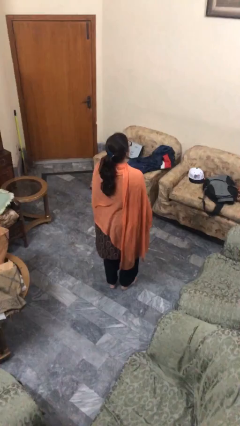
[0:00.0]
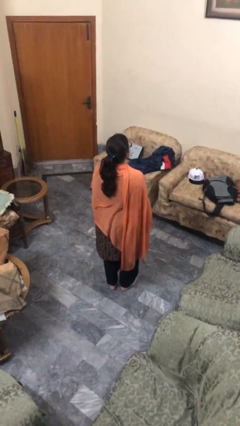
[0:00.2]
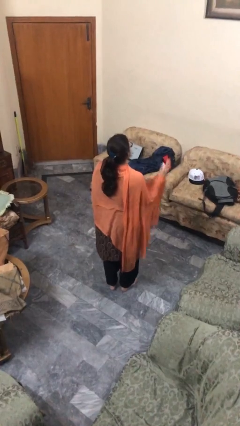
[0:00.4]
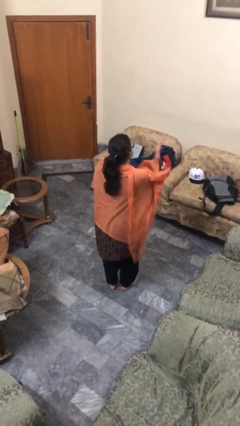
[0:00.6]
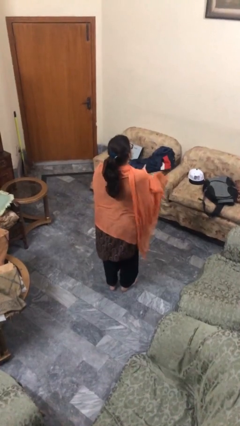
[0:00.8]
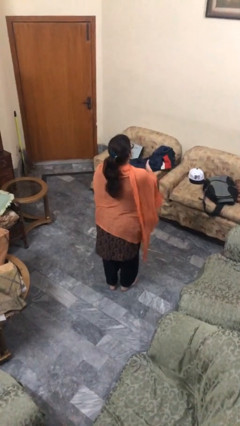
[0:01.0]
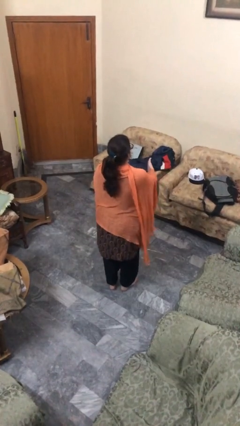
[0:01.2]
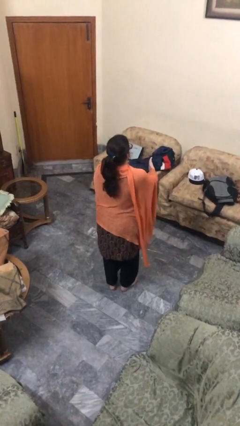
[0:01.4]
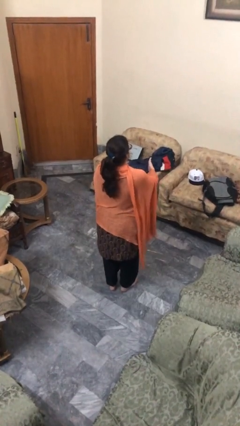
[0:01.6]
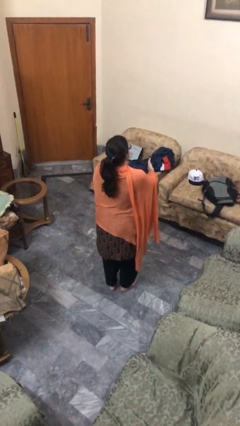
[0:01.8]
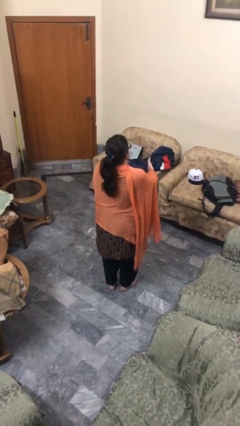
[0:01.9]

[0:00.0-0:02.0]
person karate chop

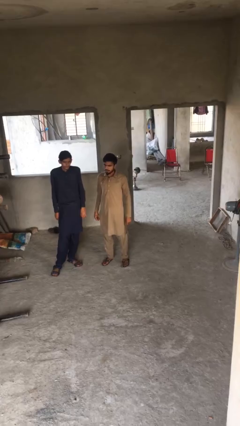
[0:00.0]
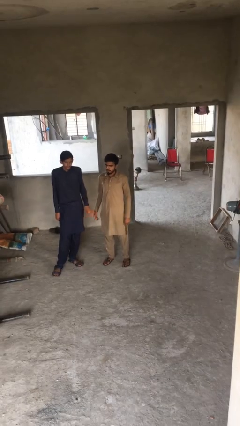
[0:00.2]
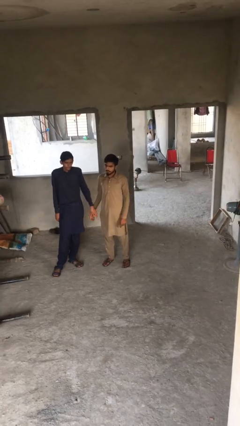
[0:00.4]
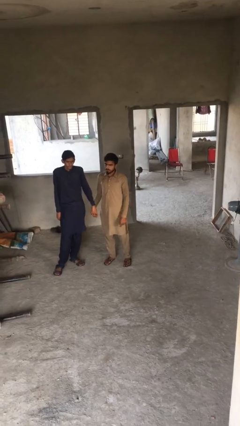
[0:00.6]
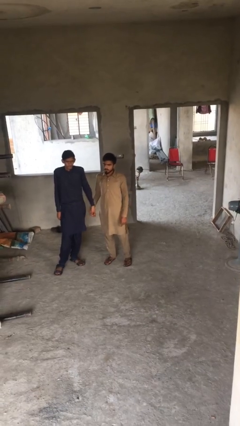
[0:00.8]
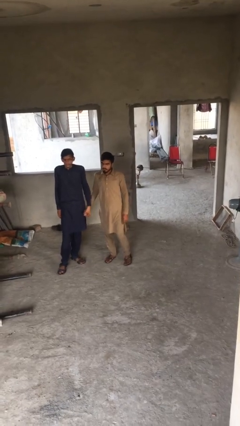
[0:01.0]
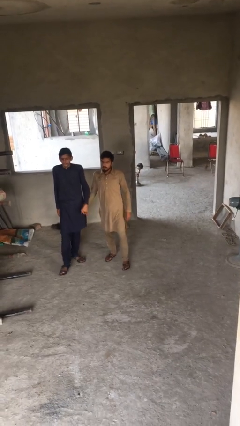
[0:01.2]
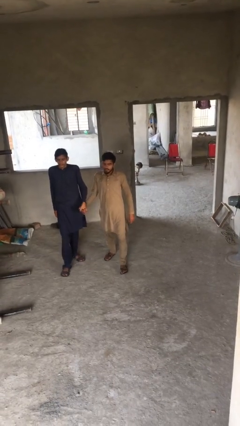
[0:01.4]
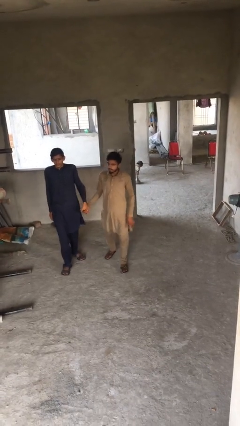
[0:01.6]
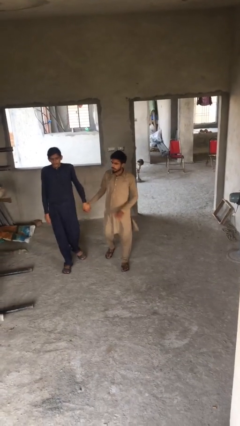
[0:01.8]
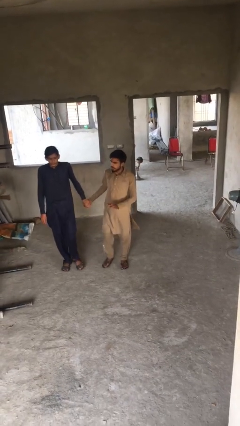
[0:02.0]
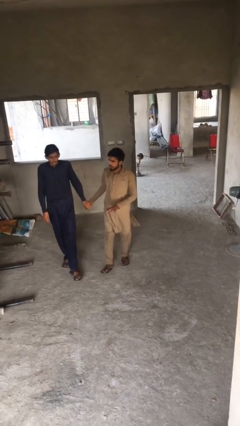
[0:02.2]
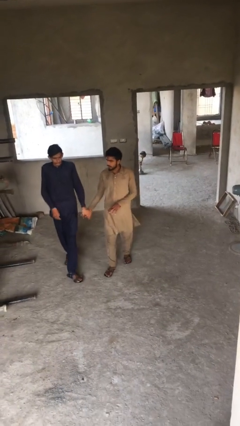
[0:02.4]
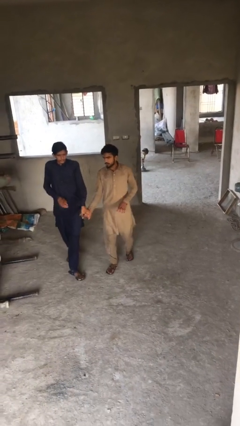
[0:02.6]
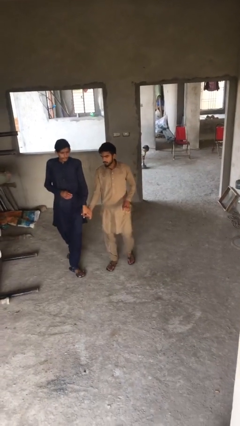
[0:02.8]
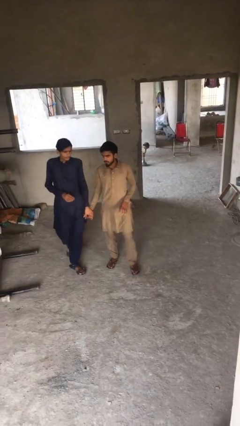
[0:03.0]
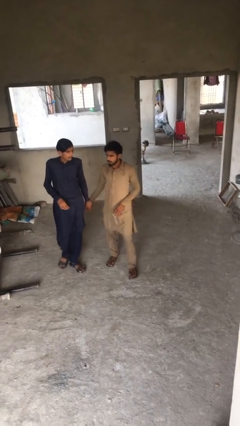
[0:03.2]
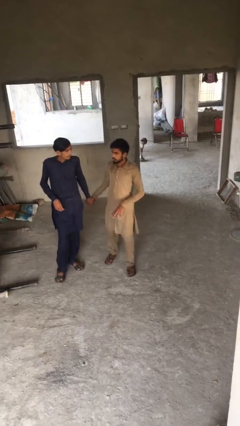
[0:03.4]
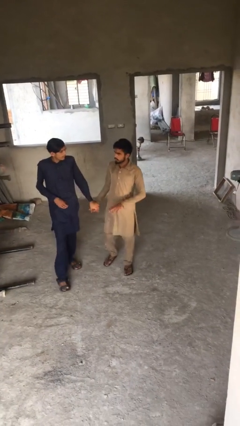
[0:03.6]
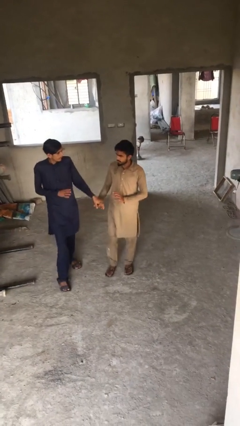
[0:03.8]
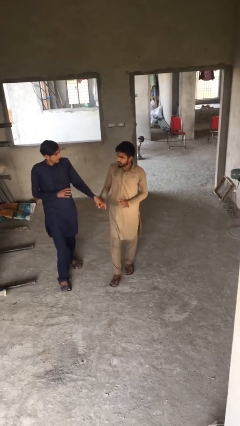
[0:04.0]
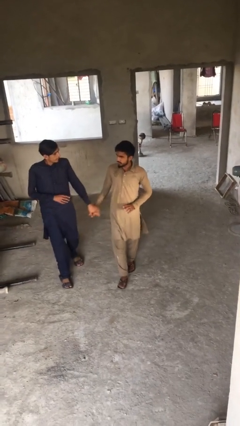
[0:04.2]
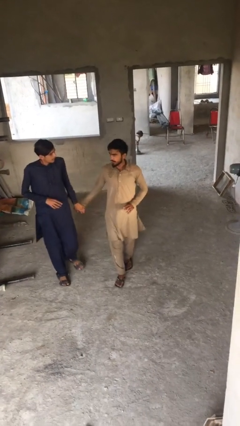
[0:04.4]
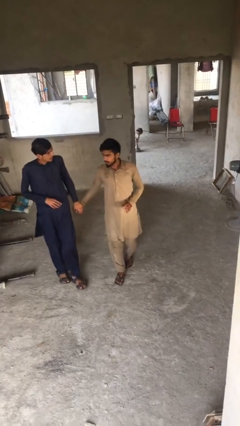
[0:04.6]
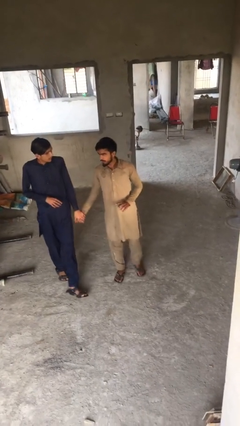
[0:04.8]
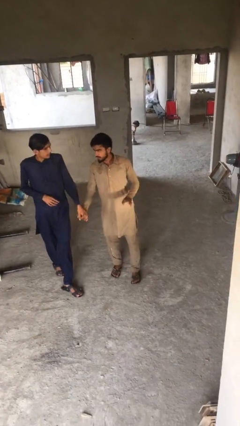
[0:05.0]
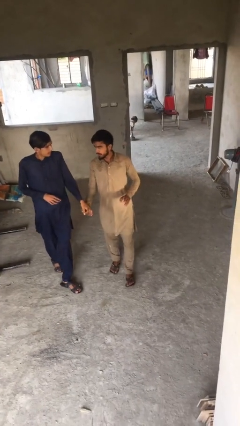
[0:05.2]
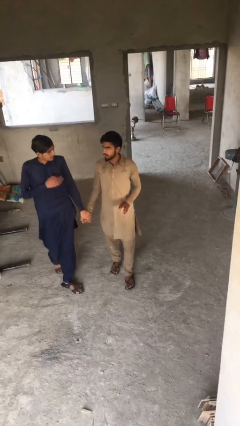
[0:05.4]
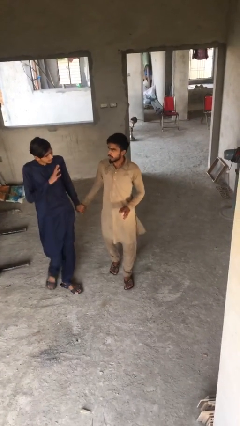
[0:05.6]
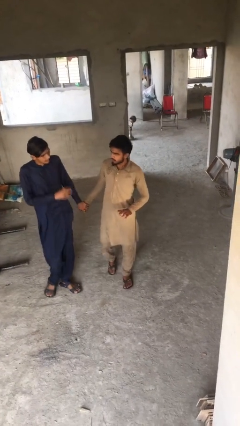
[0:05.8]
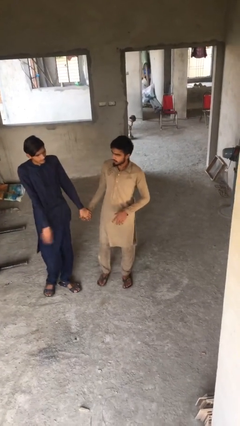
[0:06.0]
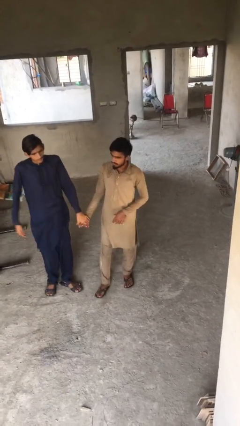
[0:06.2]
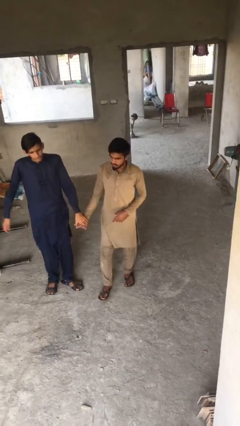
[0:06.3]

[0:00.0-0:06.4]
person holds hand

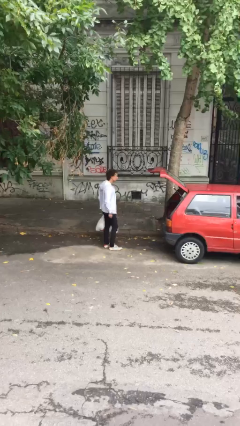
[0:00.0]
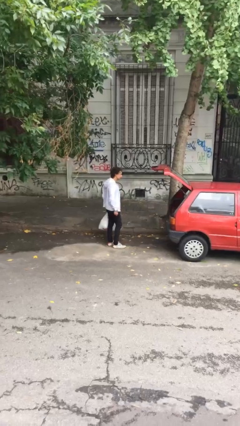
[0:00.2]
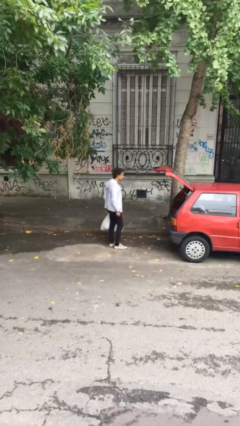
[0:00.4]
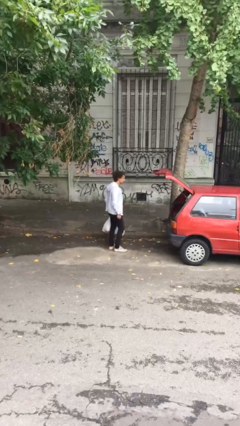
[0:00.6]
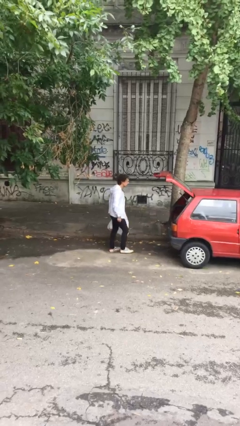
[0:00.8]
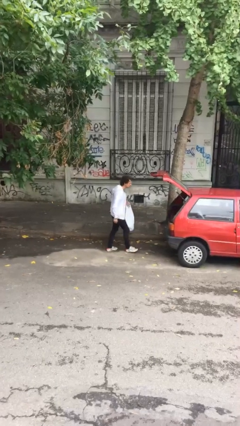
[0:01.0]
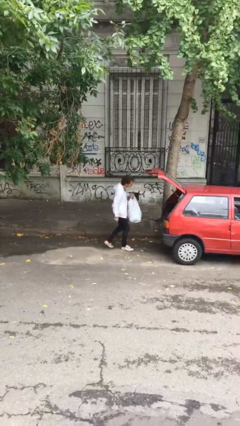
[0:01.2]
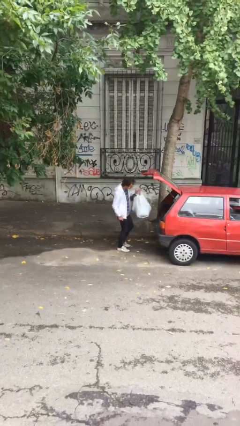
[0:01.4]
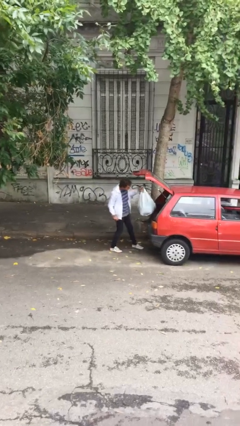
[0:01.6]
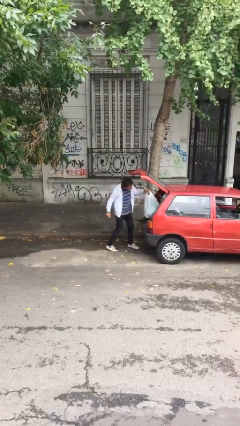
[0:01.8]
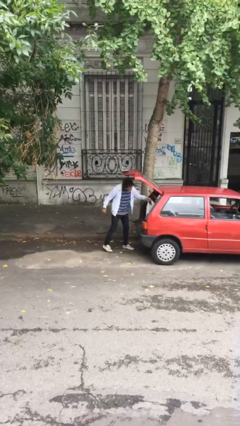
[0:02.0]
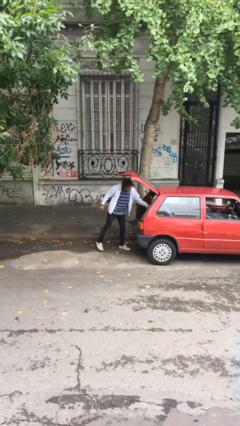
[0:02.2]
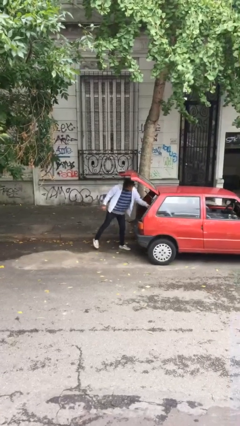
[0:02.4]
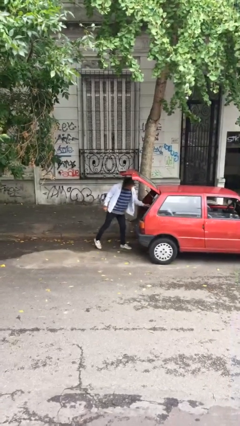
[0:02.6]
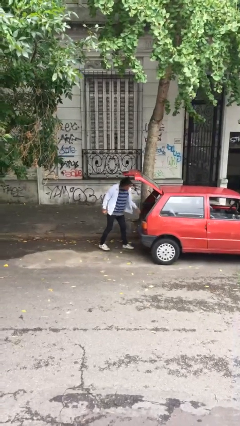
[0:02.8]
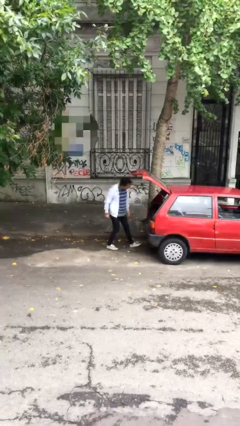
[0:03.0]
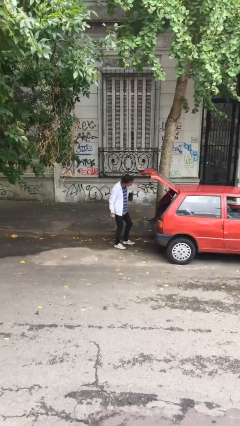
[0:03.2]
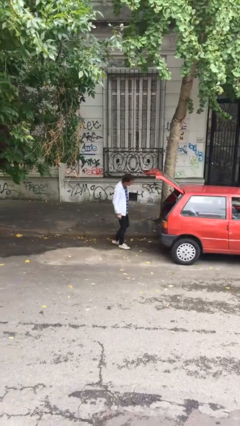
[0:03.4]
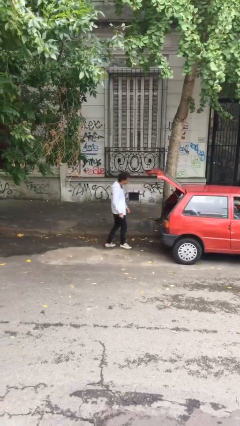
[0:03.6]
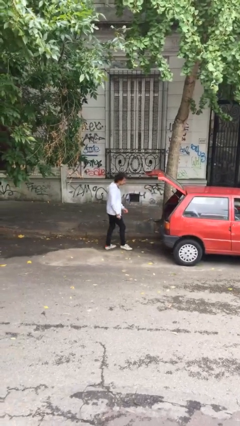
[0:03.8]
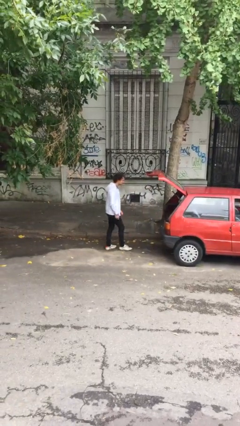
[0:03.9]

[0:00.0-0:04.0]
person loads car

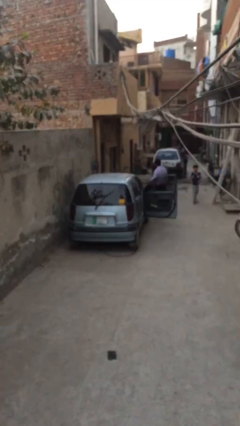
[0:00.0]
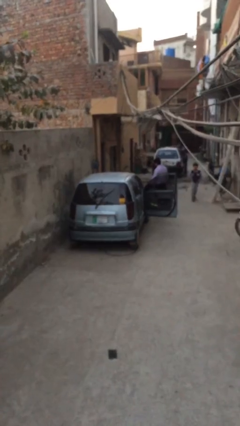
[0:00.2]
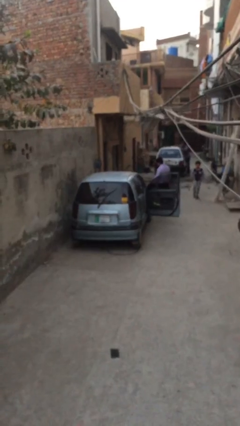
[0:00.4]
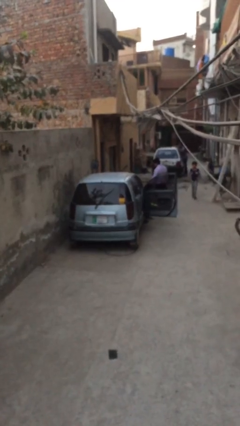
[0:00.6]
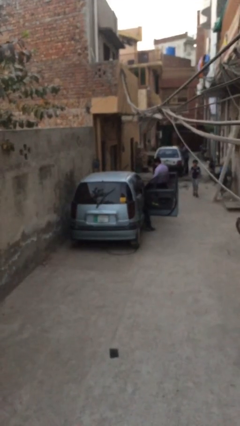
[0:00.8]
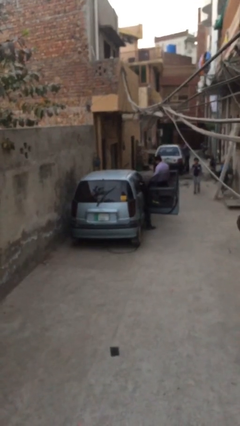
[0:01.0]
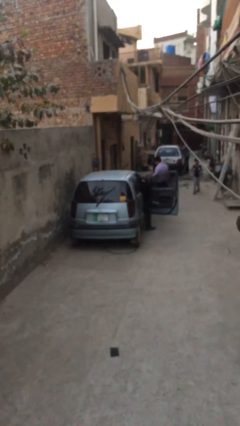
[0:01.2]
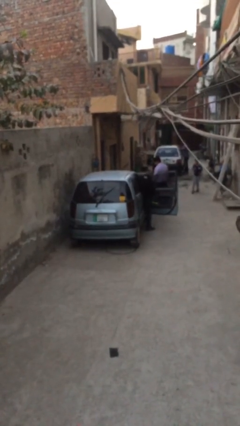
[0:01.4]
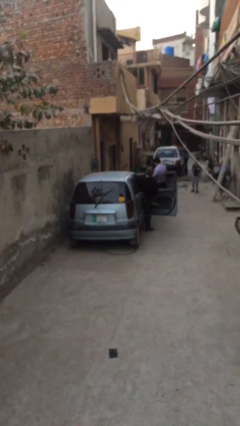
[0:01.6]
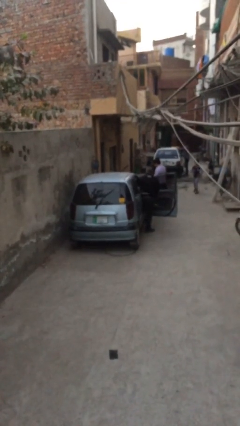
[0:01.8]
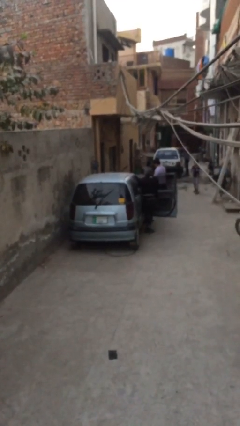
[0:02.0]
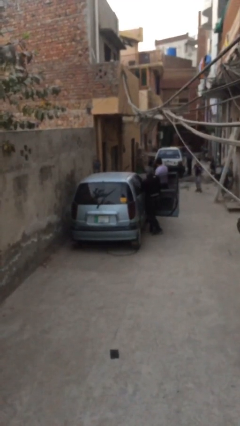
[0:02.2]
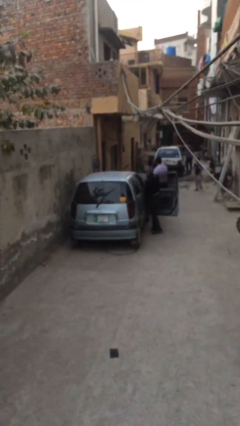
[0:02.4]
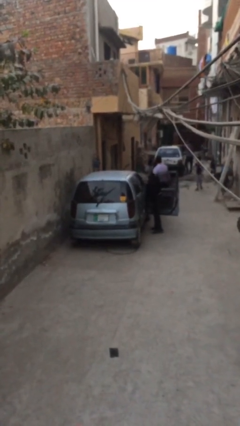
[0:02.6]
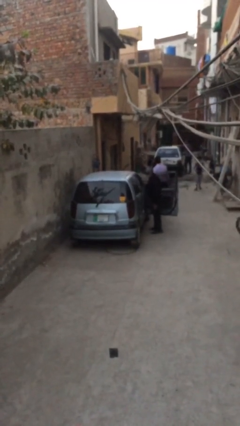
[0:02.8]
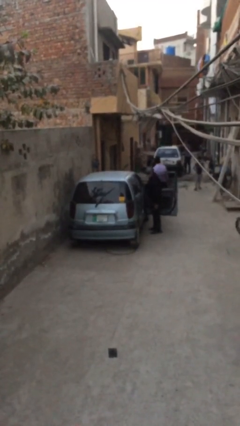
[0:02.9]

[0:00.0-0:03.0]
person exits car

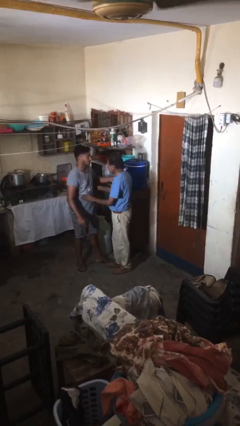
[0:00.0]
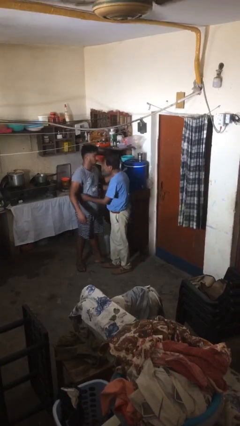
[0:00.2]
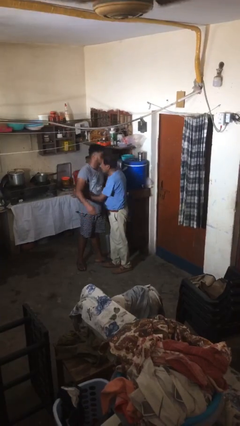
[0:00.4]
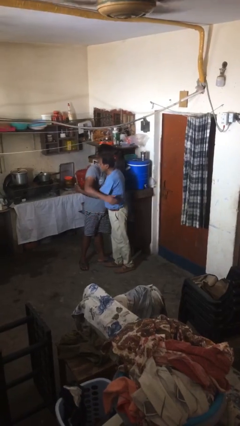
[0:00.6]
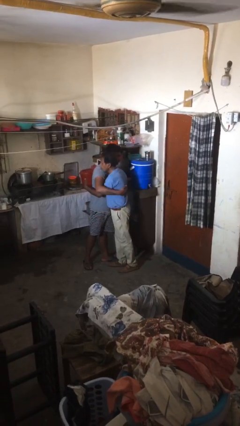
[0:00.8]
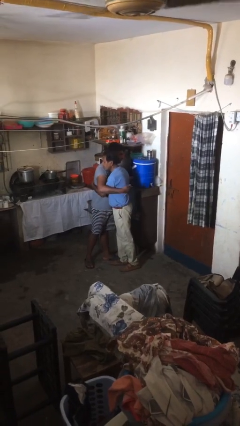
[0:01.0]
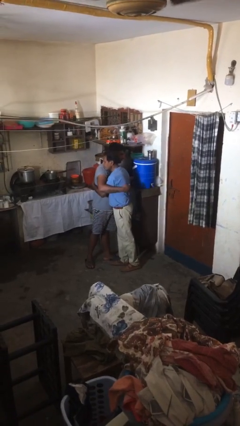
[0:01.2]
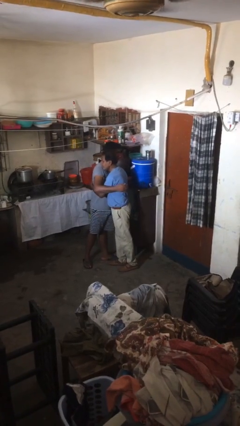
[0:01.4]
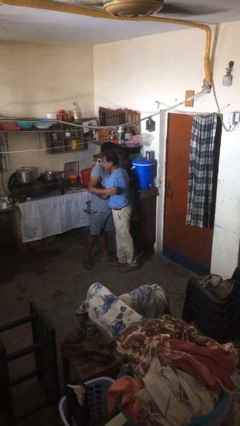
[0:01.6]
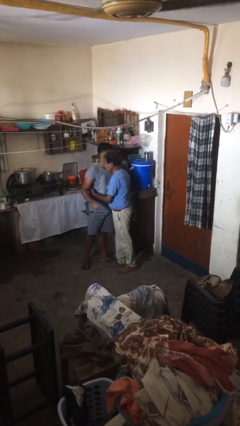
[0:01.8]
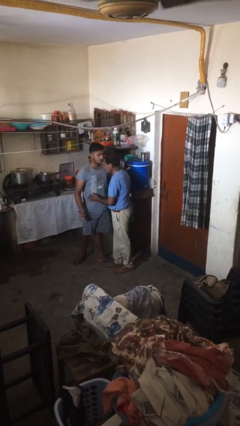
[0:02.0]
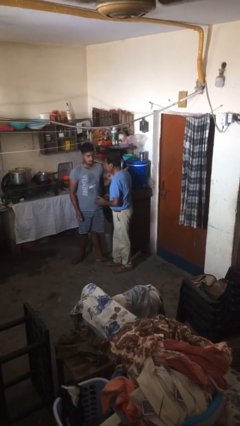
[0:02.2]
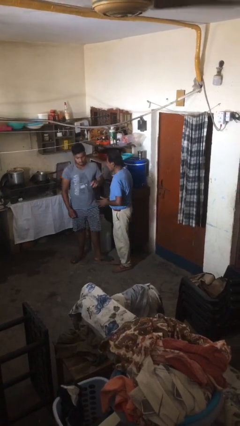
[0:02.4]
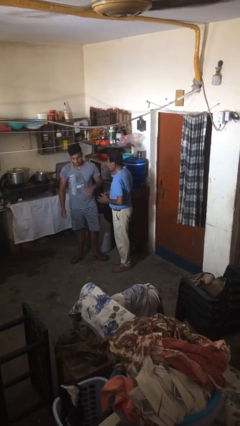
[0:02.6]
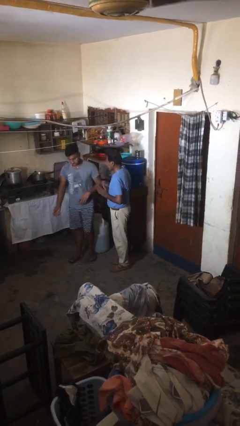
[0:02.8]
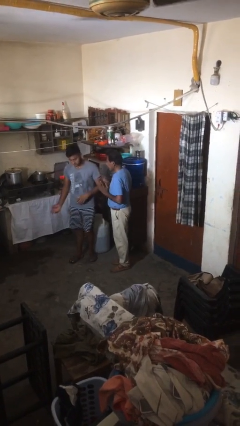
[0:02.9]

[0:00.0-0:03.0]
person embraces person
